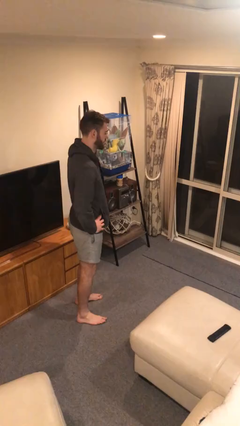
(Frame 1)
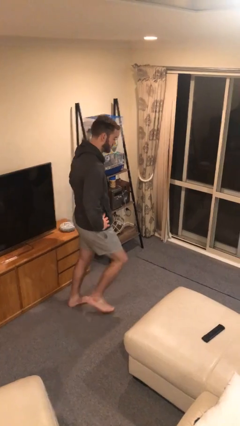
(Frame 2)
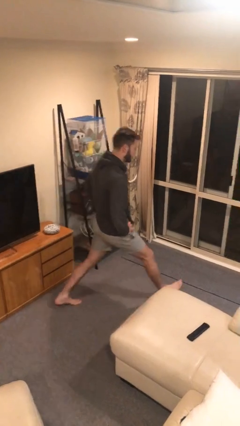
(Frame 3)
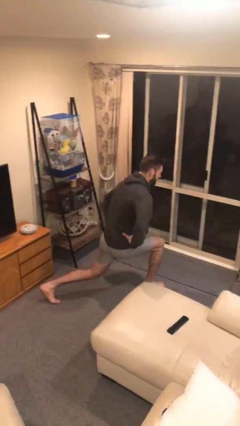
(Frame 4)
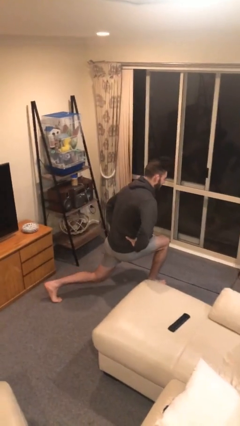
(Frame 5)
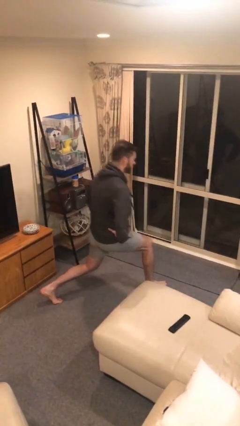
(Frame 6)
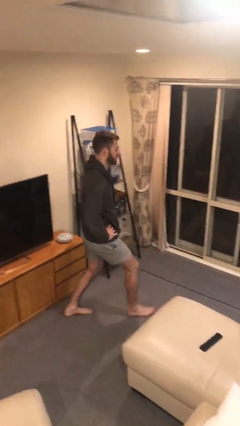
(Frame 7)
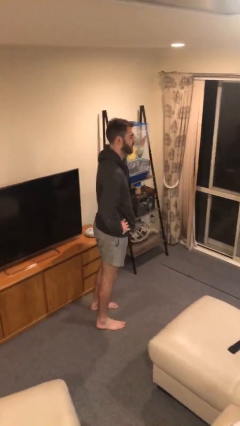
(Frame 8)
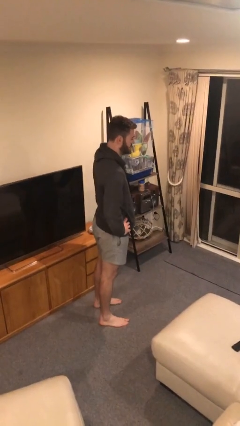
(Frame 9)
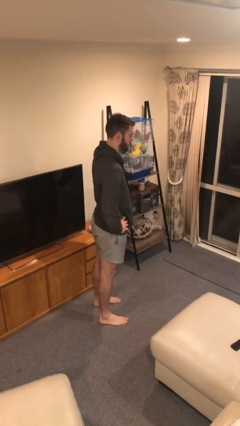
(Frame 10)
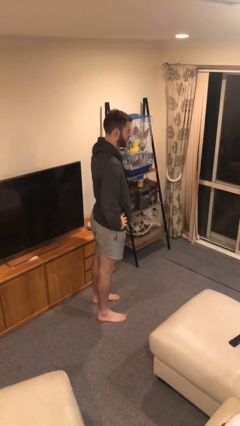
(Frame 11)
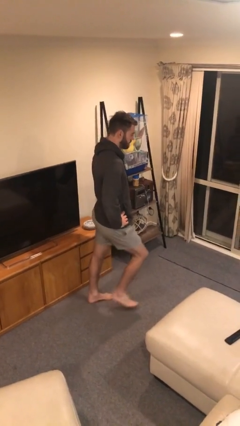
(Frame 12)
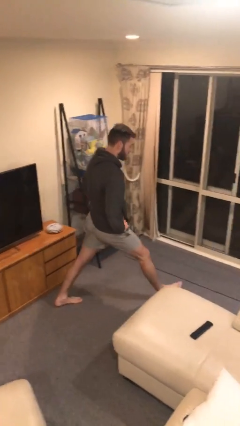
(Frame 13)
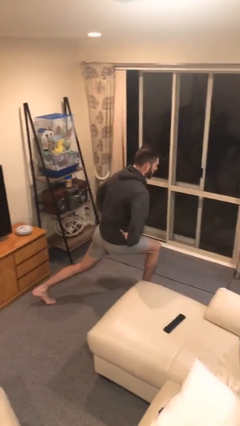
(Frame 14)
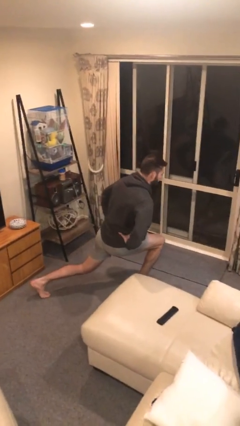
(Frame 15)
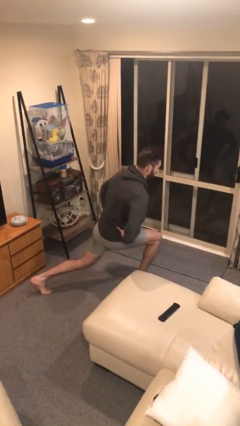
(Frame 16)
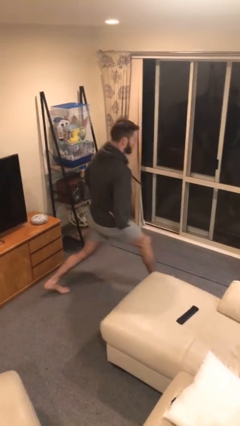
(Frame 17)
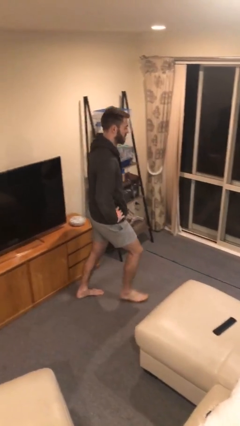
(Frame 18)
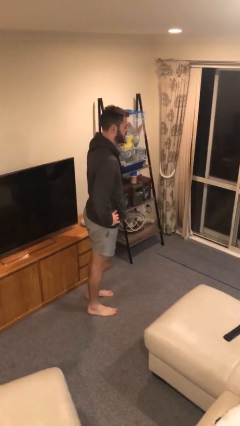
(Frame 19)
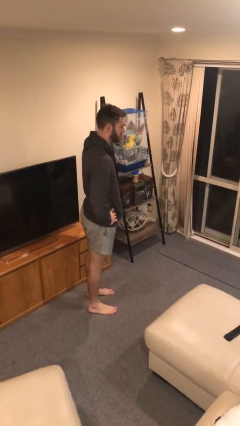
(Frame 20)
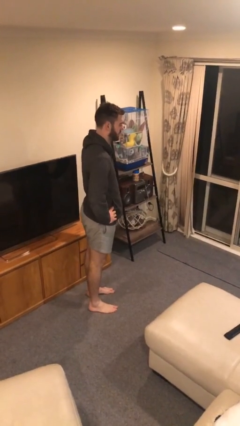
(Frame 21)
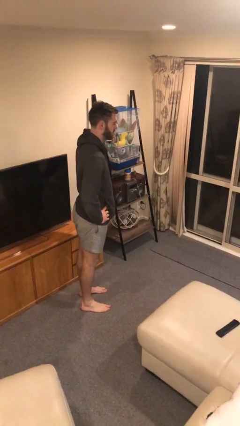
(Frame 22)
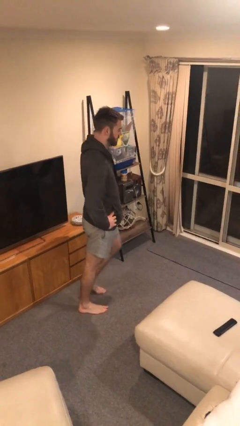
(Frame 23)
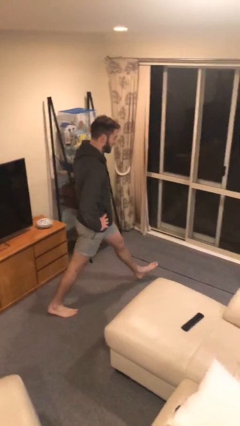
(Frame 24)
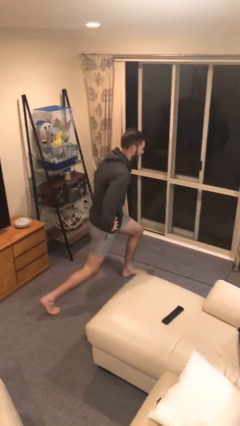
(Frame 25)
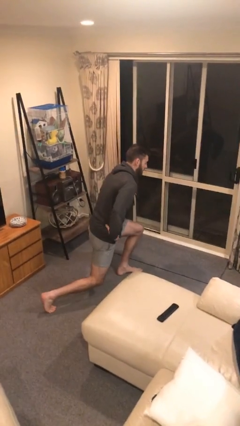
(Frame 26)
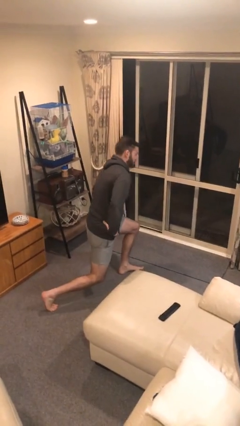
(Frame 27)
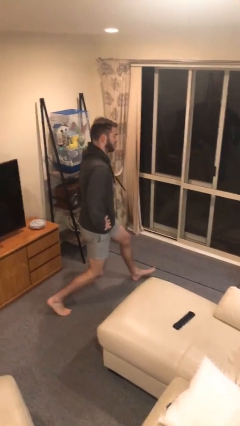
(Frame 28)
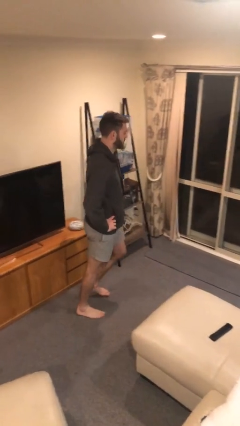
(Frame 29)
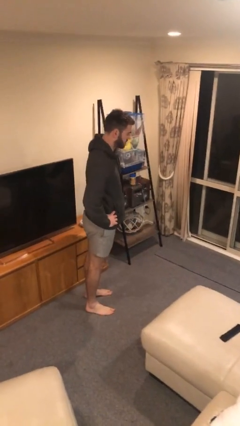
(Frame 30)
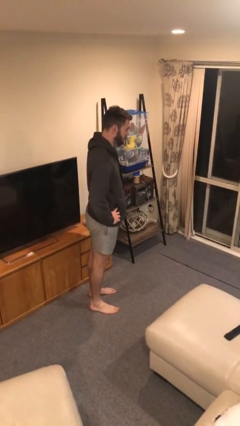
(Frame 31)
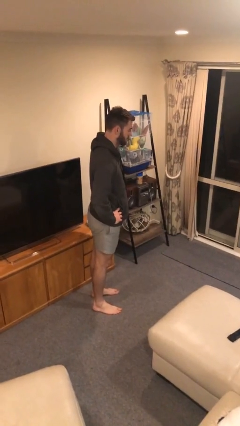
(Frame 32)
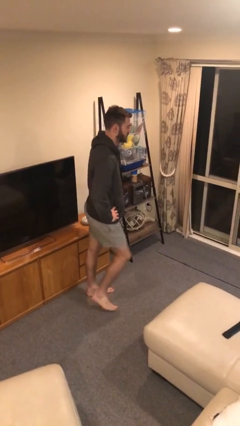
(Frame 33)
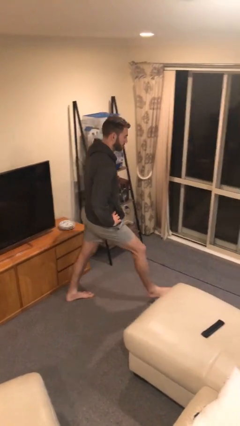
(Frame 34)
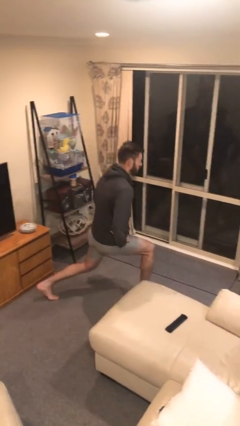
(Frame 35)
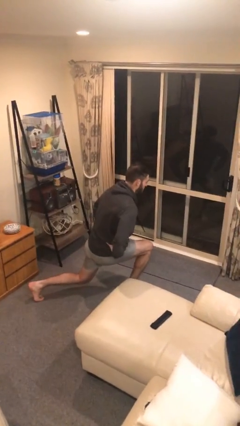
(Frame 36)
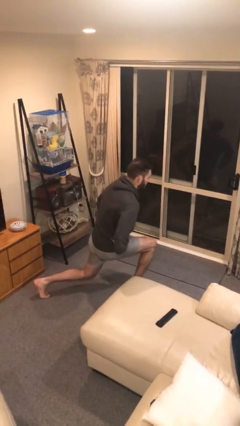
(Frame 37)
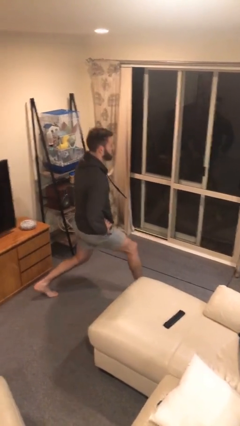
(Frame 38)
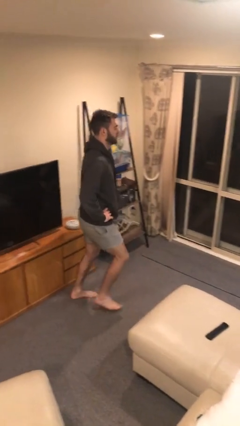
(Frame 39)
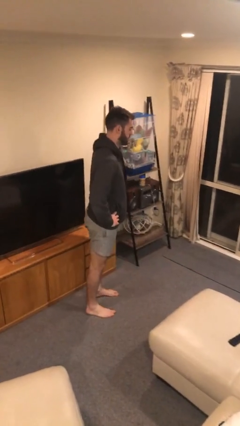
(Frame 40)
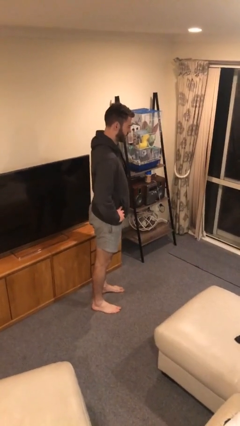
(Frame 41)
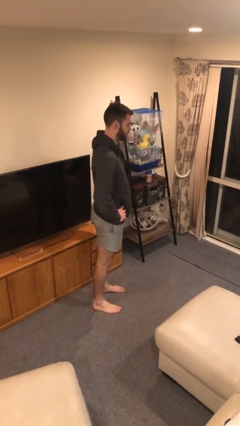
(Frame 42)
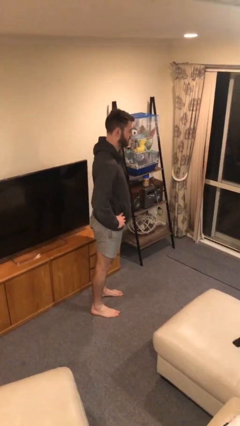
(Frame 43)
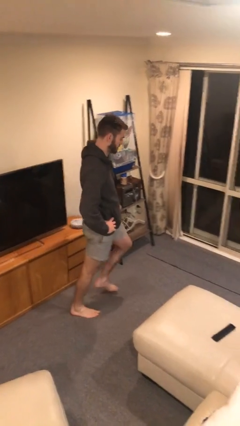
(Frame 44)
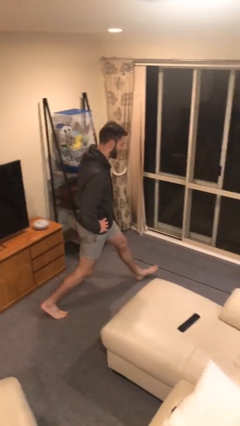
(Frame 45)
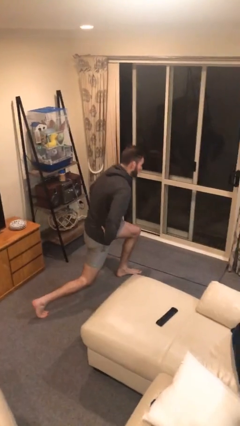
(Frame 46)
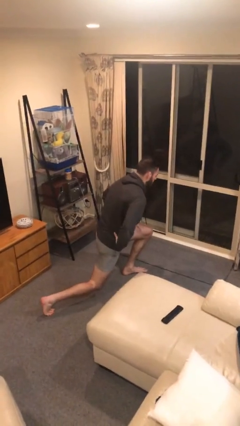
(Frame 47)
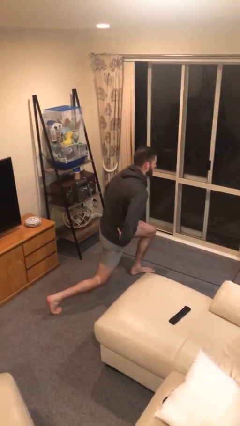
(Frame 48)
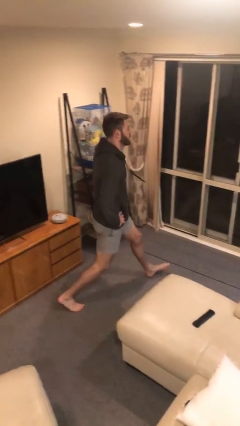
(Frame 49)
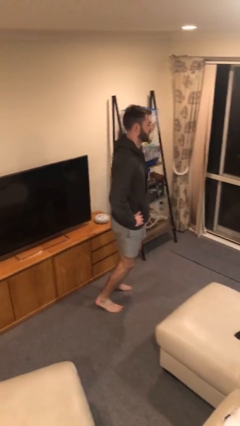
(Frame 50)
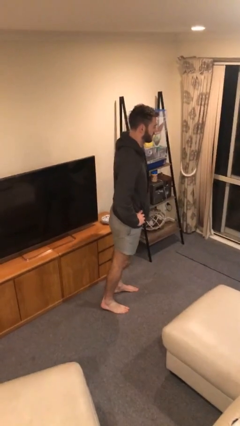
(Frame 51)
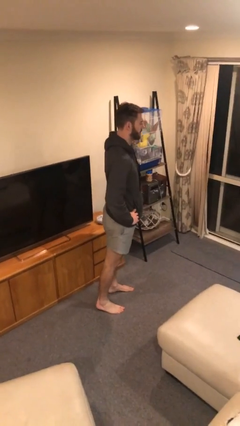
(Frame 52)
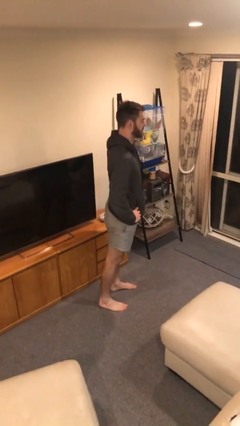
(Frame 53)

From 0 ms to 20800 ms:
person exercises with lunges

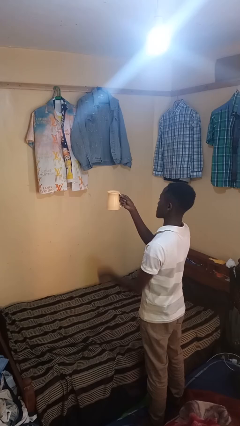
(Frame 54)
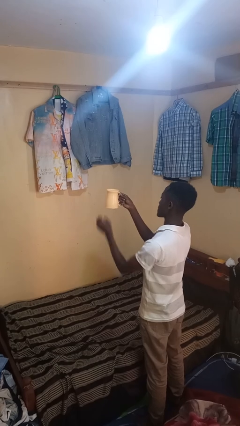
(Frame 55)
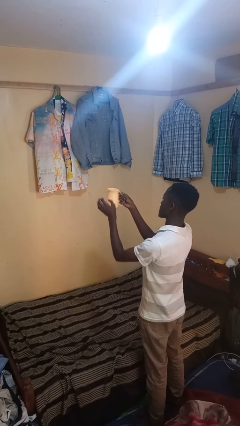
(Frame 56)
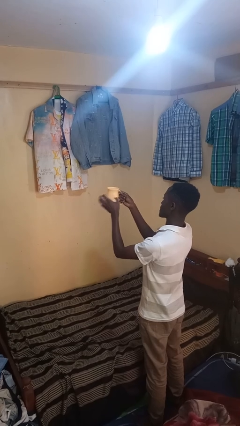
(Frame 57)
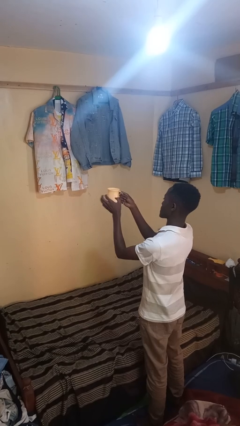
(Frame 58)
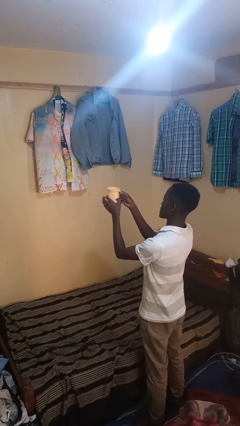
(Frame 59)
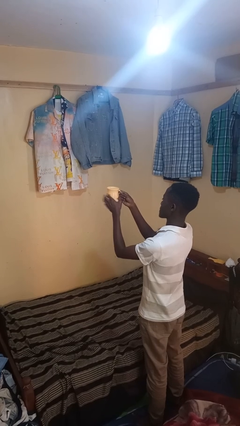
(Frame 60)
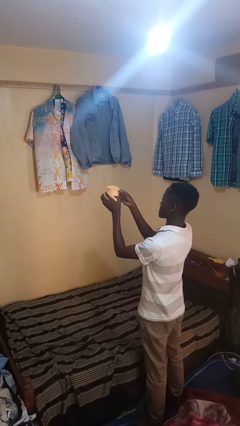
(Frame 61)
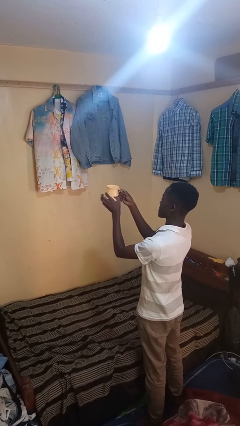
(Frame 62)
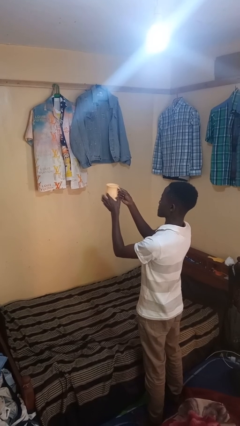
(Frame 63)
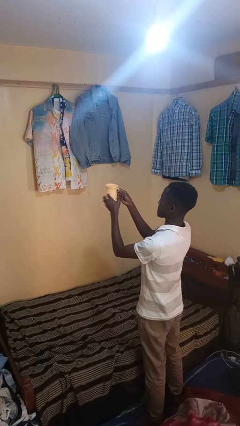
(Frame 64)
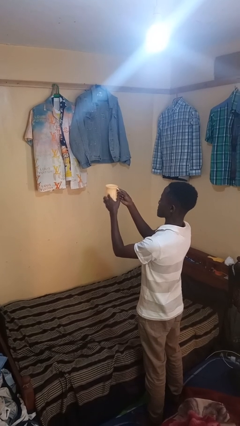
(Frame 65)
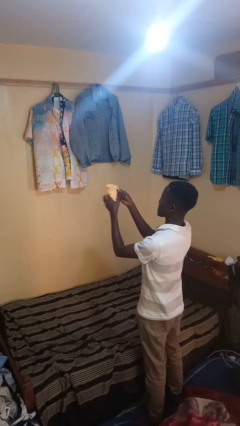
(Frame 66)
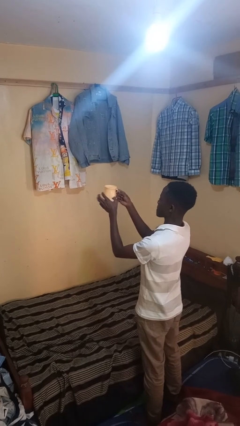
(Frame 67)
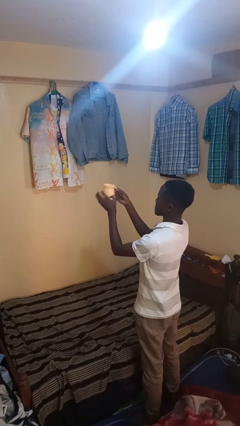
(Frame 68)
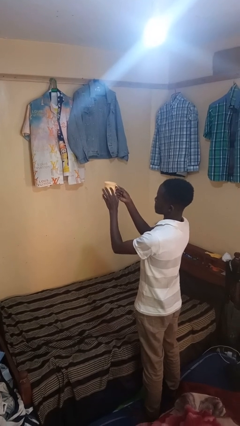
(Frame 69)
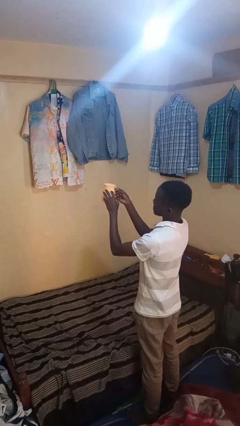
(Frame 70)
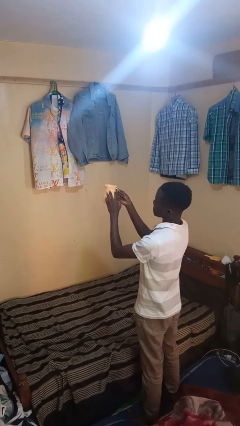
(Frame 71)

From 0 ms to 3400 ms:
person taps object with finger

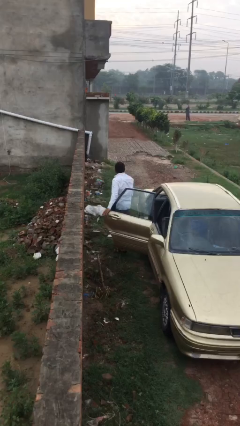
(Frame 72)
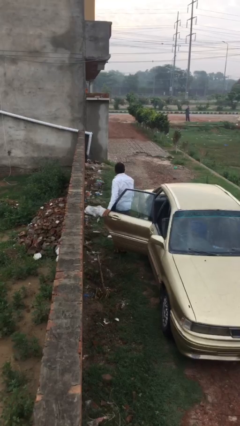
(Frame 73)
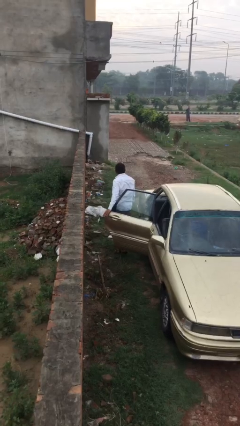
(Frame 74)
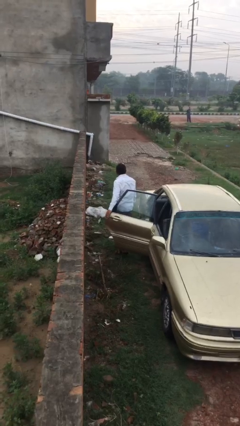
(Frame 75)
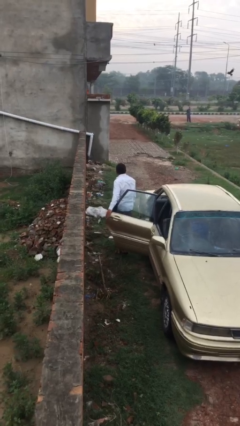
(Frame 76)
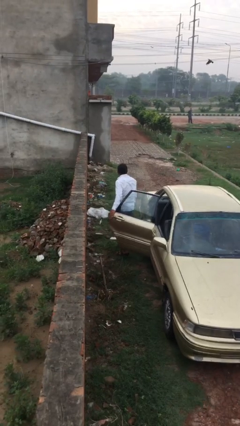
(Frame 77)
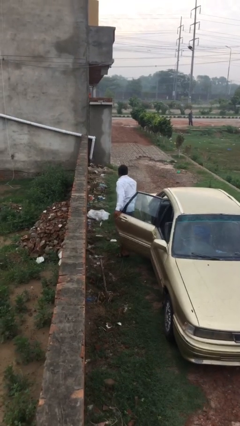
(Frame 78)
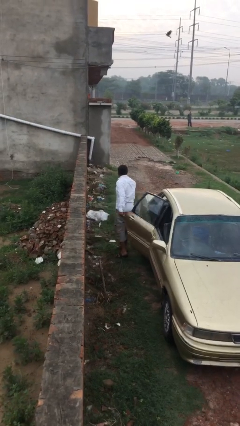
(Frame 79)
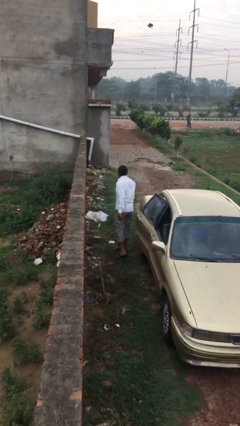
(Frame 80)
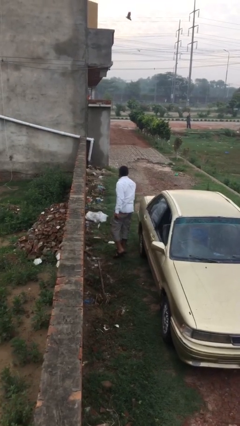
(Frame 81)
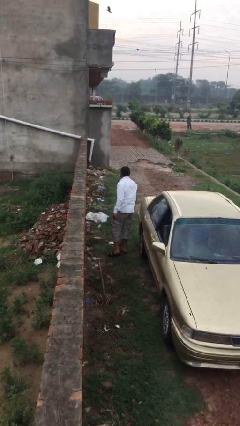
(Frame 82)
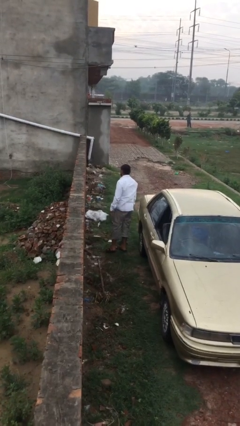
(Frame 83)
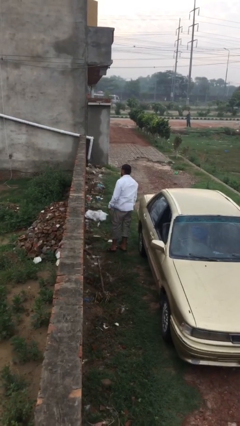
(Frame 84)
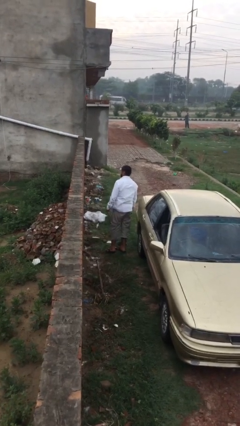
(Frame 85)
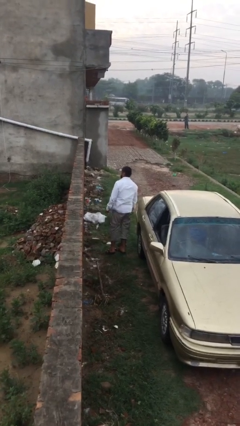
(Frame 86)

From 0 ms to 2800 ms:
person closes car door

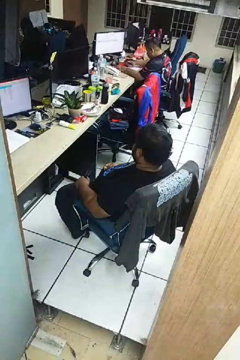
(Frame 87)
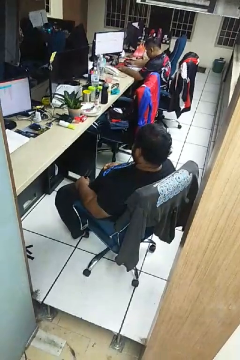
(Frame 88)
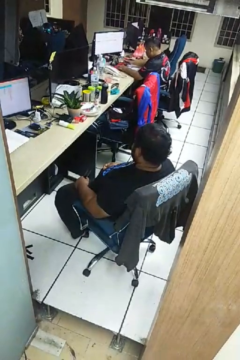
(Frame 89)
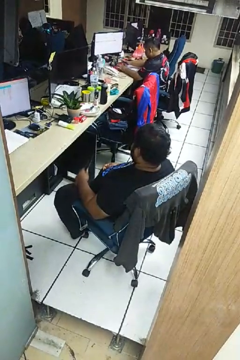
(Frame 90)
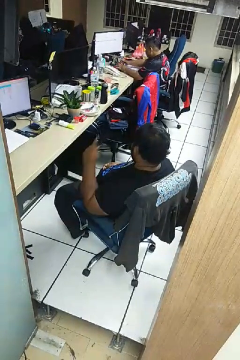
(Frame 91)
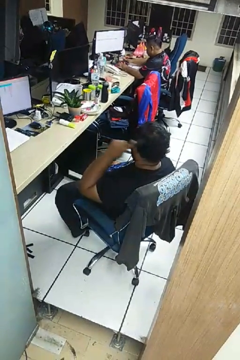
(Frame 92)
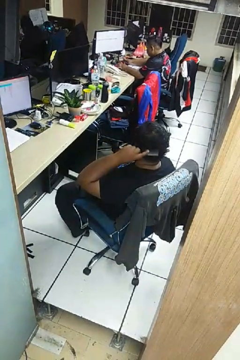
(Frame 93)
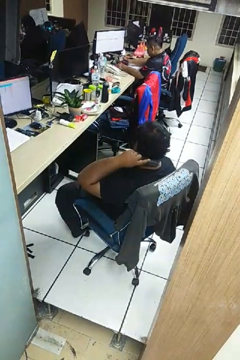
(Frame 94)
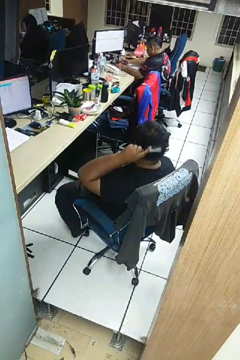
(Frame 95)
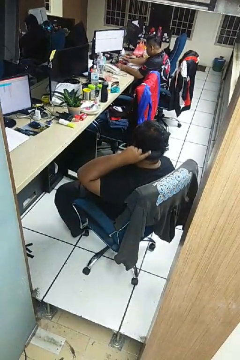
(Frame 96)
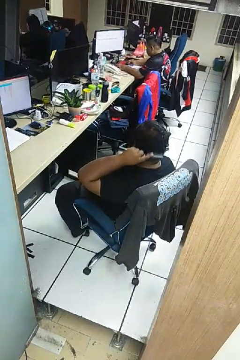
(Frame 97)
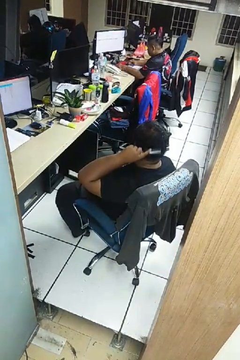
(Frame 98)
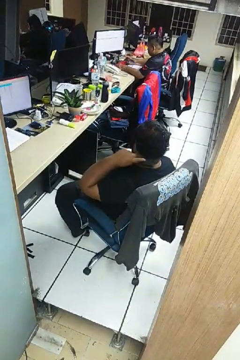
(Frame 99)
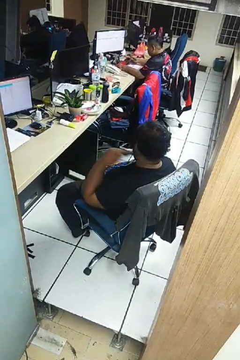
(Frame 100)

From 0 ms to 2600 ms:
person brushes hair
